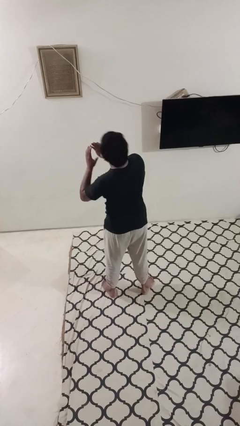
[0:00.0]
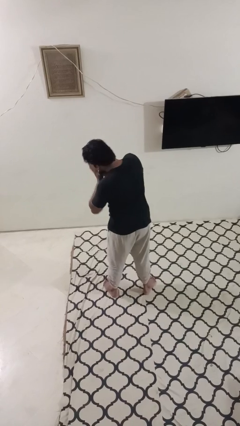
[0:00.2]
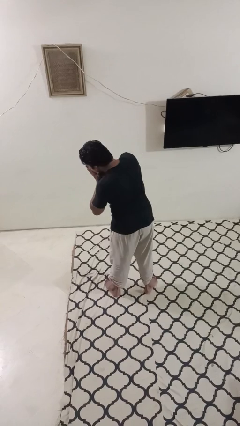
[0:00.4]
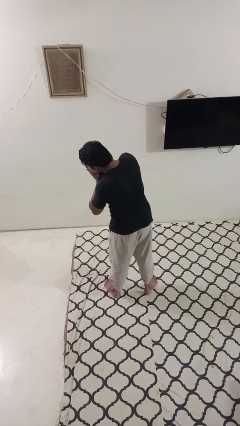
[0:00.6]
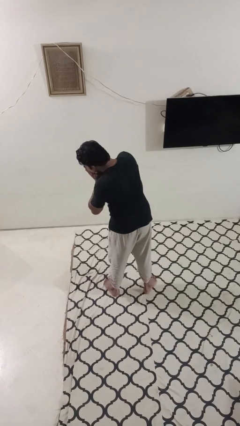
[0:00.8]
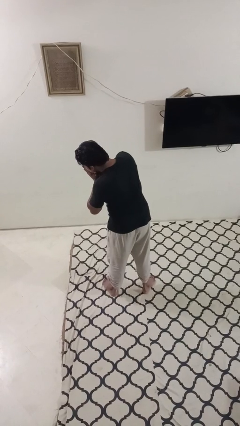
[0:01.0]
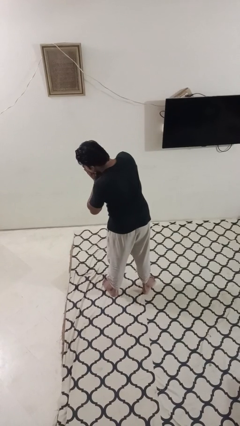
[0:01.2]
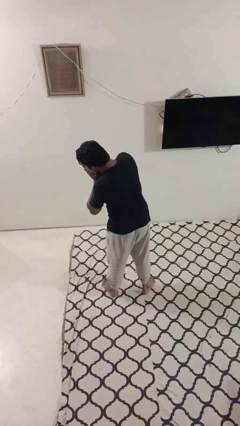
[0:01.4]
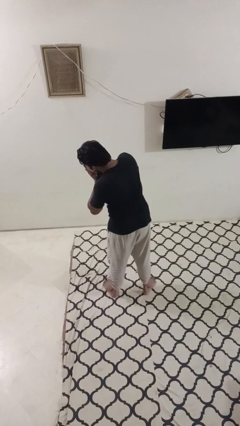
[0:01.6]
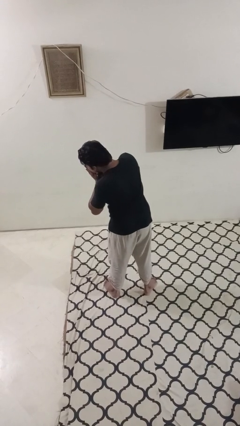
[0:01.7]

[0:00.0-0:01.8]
person sneezes into hand

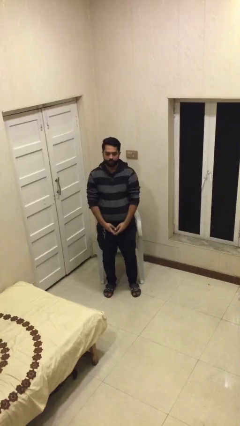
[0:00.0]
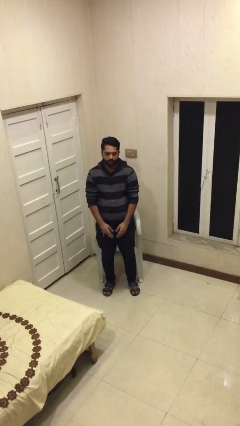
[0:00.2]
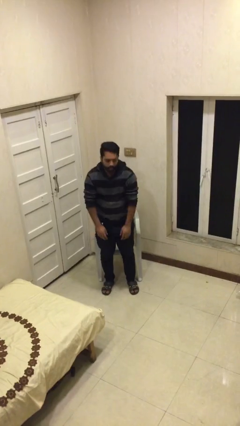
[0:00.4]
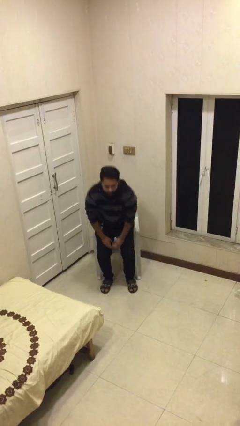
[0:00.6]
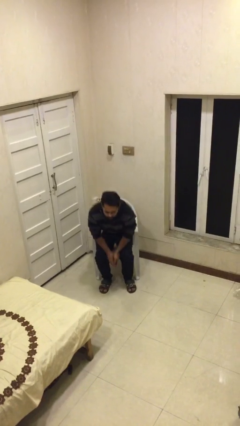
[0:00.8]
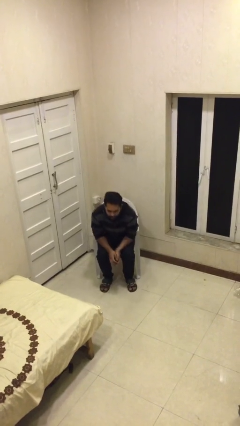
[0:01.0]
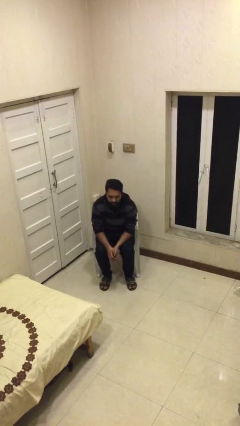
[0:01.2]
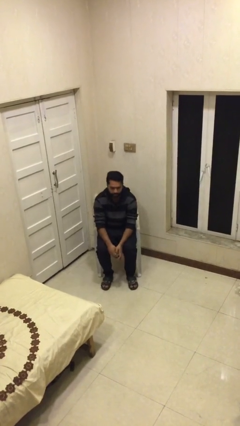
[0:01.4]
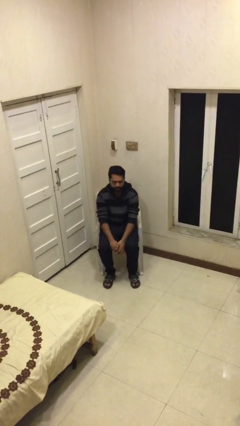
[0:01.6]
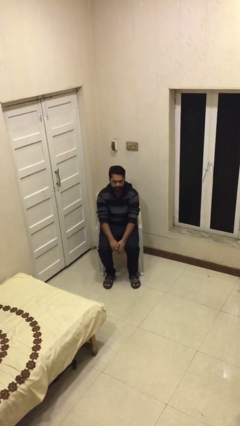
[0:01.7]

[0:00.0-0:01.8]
person sits down

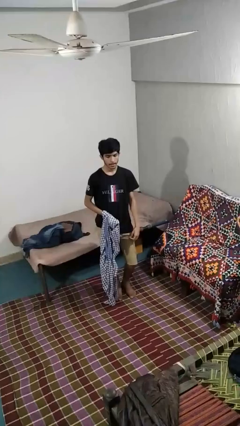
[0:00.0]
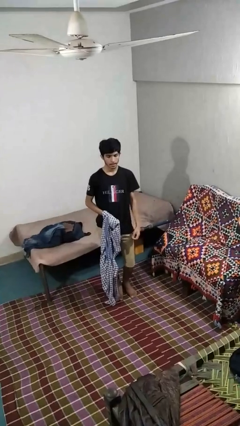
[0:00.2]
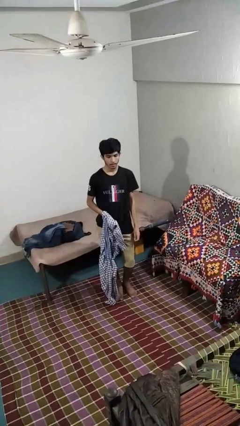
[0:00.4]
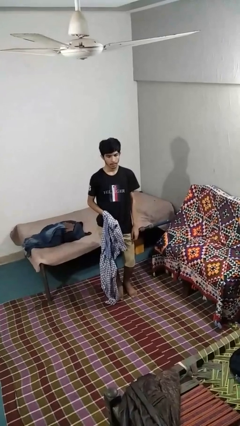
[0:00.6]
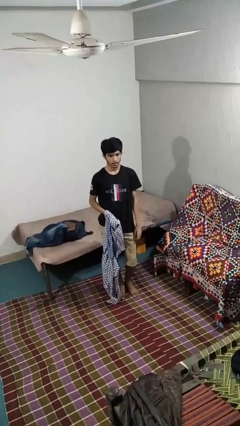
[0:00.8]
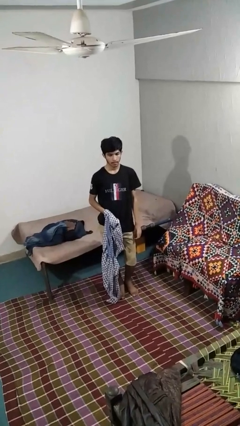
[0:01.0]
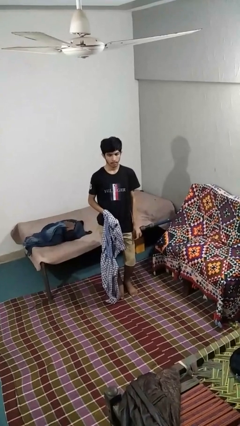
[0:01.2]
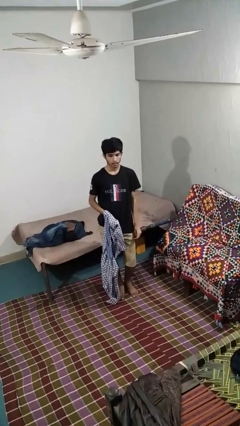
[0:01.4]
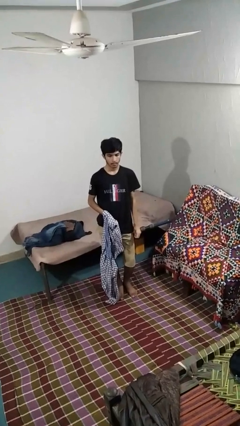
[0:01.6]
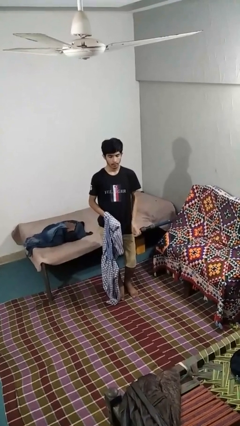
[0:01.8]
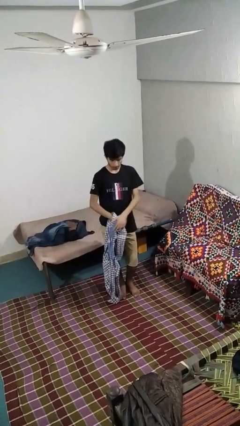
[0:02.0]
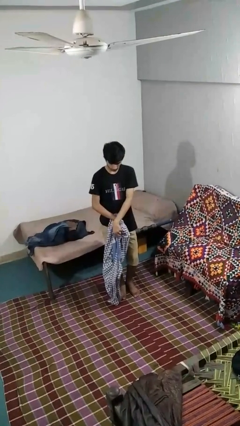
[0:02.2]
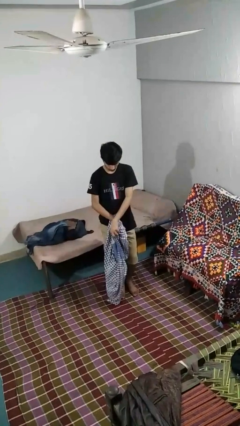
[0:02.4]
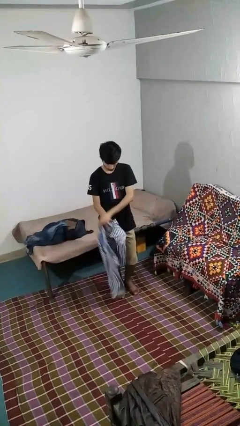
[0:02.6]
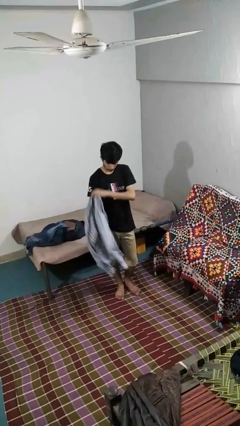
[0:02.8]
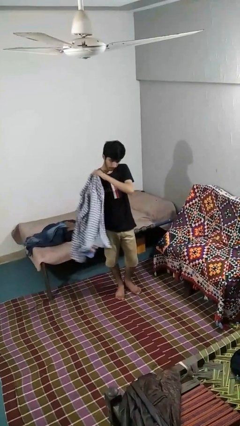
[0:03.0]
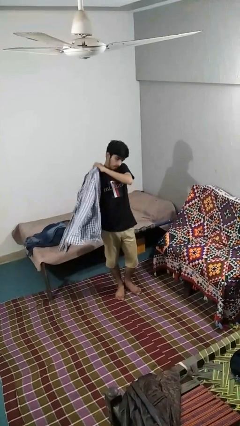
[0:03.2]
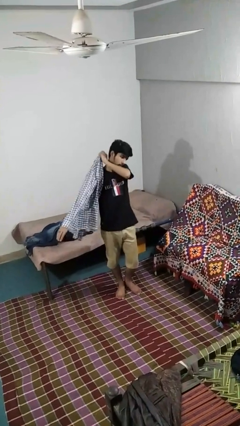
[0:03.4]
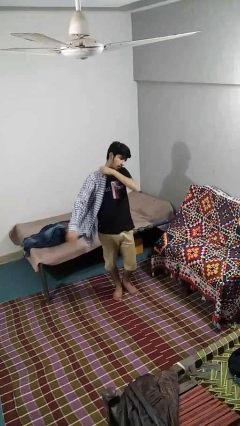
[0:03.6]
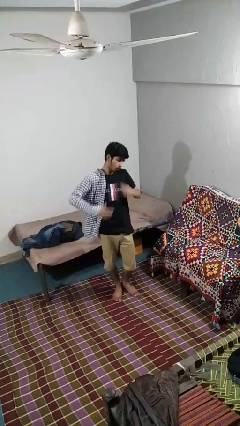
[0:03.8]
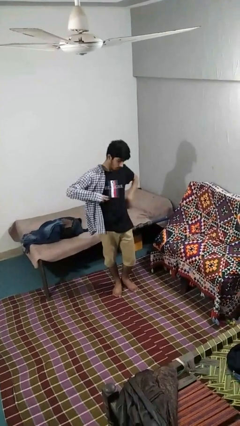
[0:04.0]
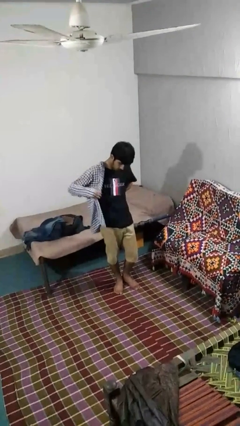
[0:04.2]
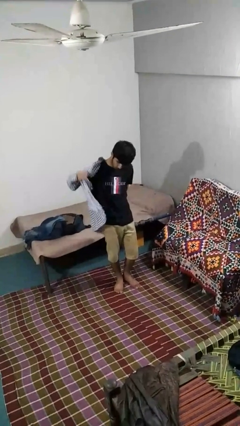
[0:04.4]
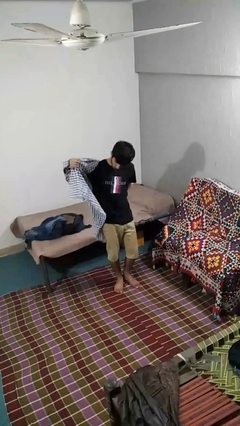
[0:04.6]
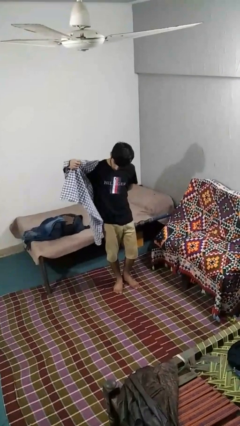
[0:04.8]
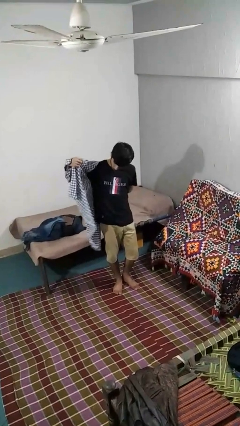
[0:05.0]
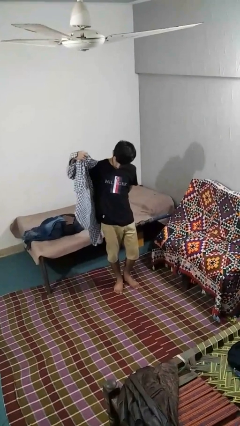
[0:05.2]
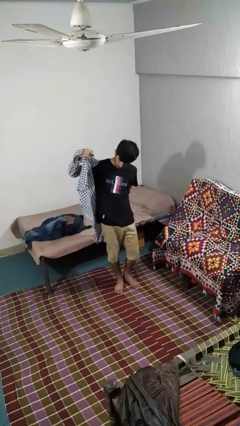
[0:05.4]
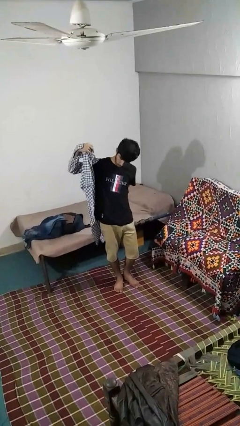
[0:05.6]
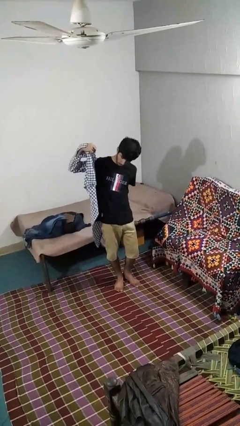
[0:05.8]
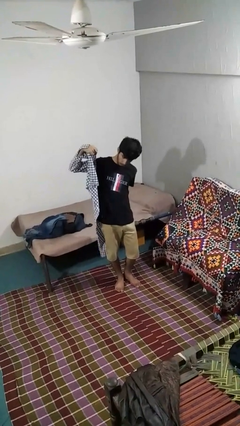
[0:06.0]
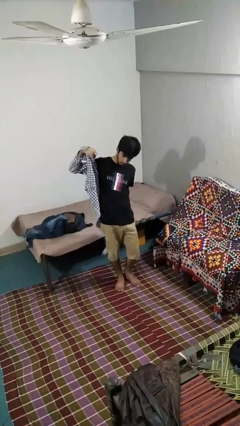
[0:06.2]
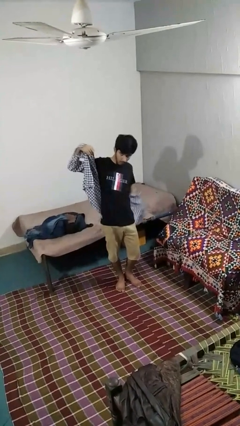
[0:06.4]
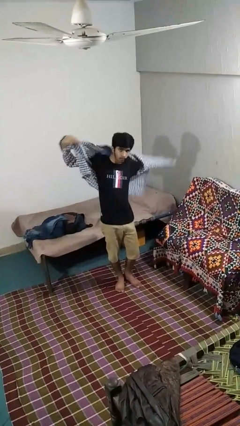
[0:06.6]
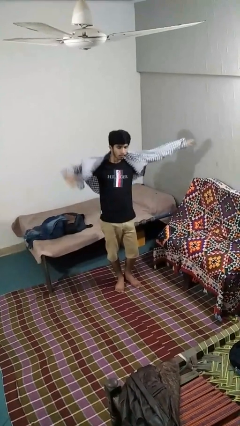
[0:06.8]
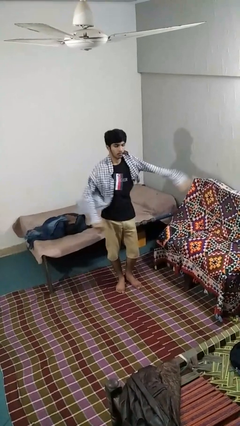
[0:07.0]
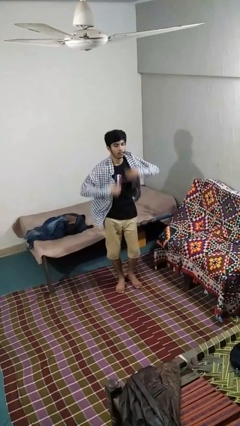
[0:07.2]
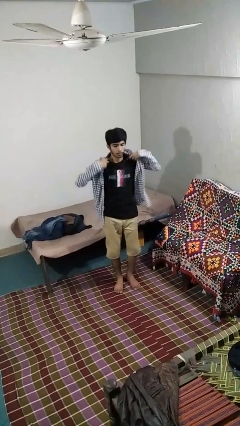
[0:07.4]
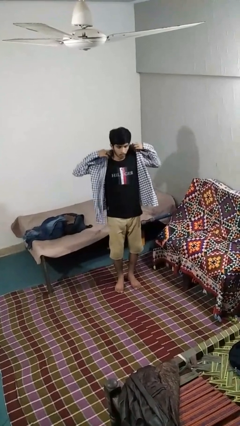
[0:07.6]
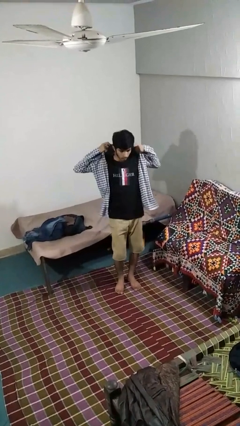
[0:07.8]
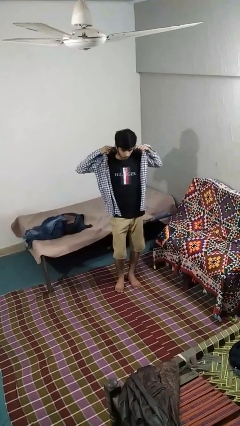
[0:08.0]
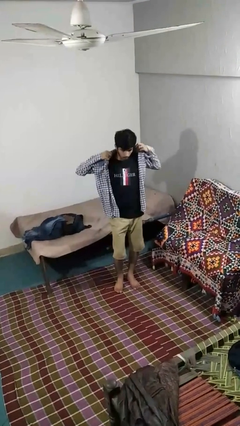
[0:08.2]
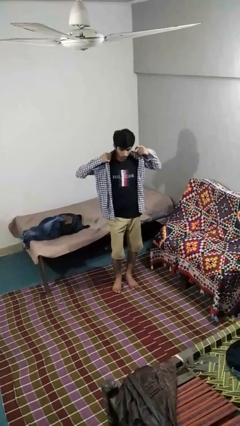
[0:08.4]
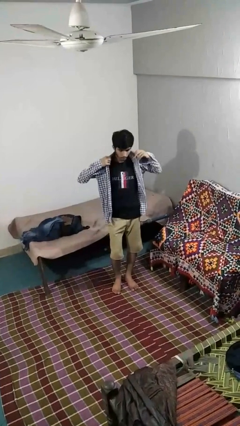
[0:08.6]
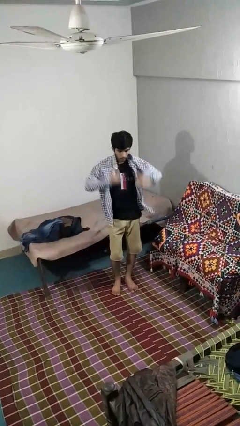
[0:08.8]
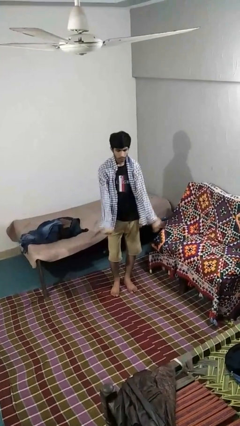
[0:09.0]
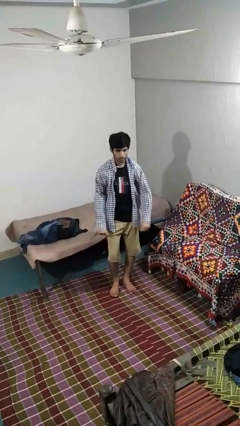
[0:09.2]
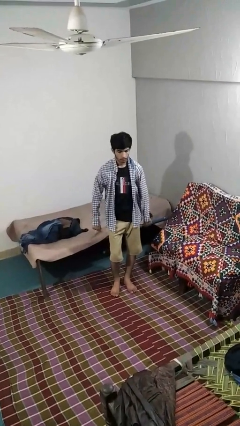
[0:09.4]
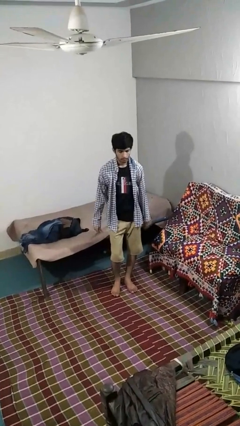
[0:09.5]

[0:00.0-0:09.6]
person puts on shirt

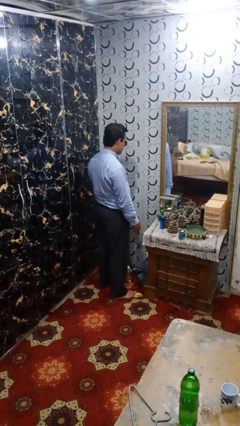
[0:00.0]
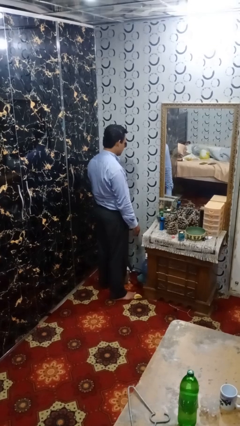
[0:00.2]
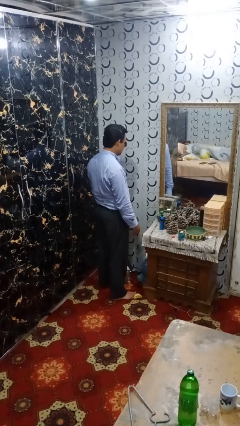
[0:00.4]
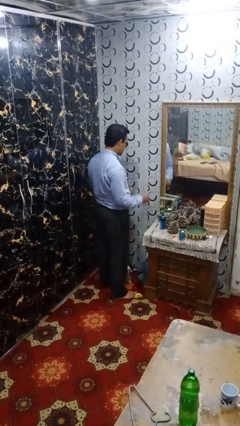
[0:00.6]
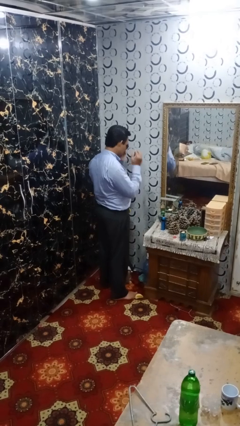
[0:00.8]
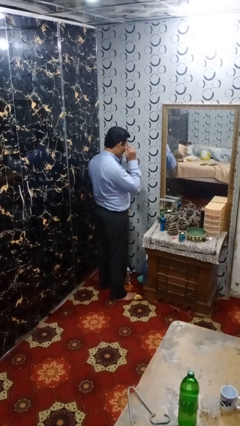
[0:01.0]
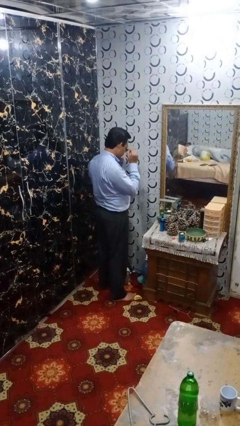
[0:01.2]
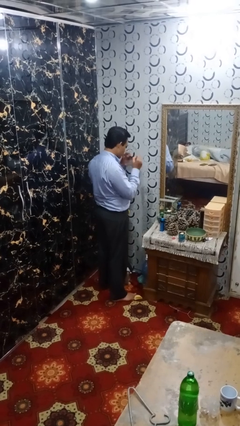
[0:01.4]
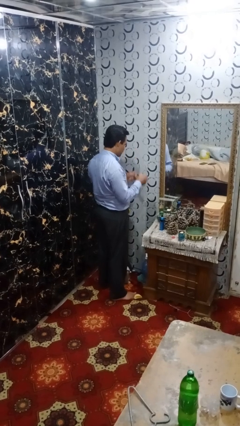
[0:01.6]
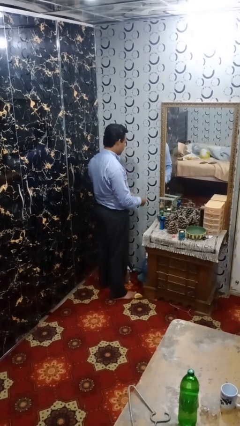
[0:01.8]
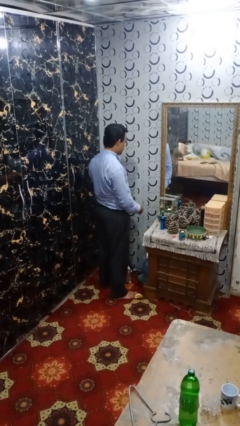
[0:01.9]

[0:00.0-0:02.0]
person takes off sunglasses

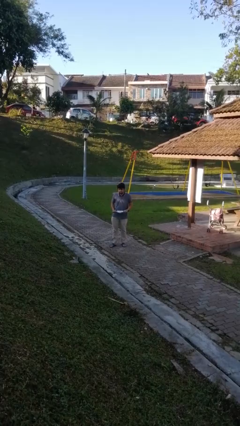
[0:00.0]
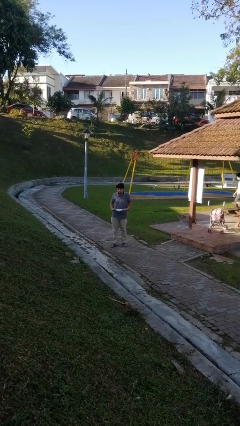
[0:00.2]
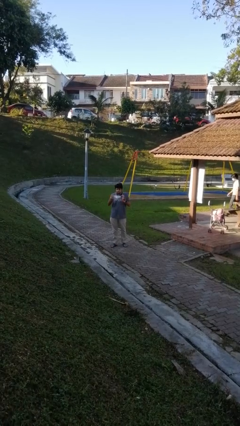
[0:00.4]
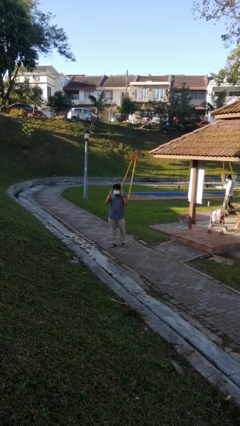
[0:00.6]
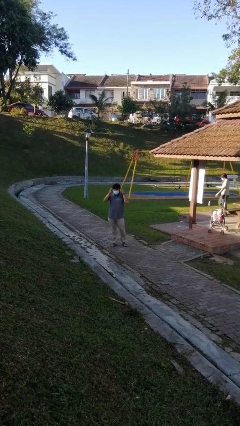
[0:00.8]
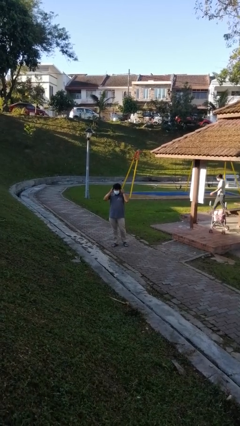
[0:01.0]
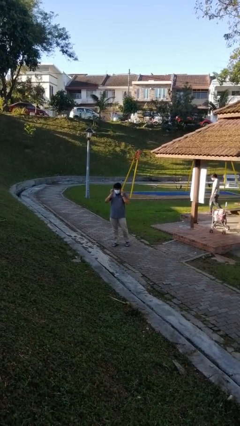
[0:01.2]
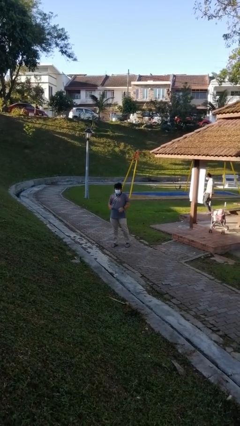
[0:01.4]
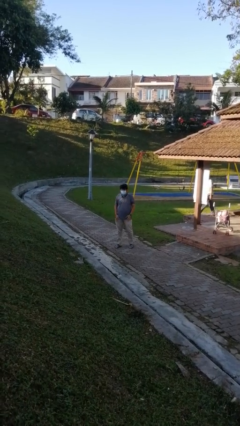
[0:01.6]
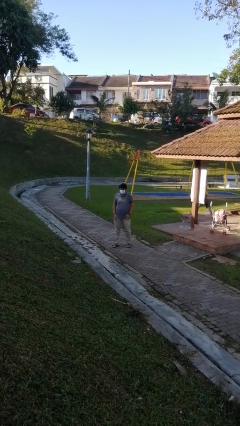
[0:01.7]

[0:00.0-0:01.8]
person puts on facemask

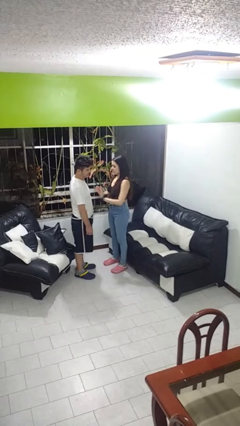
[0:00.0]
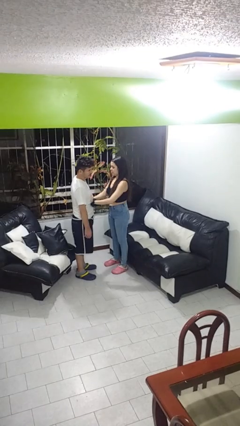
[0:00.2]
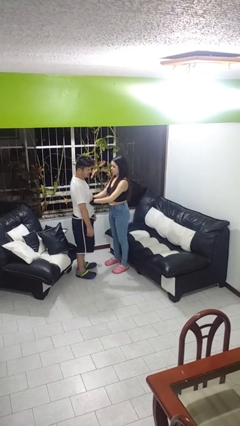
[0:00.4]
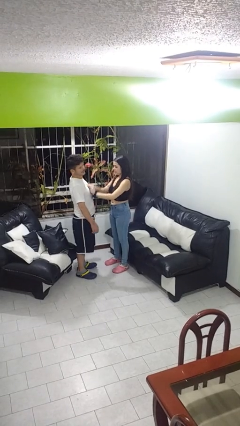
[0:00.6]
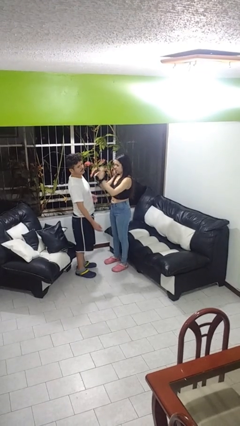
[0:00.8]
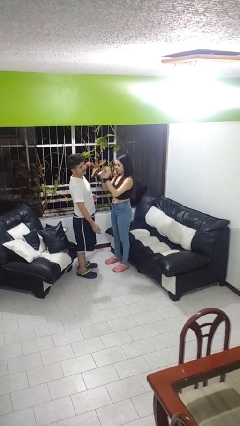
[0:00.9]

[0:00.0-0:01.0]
person shoves person
